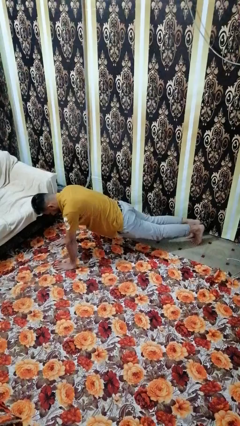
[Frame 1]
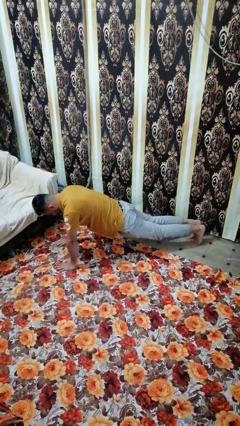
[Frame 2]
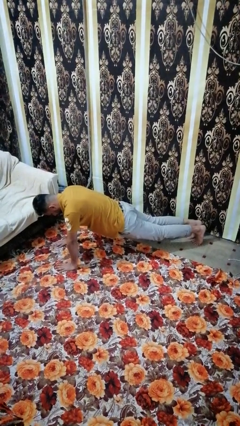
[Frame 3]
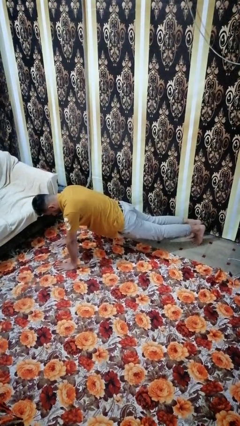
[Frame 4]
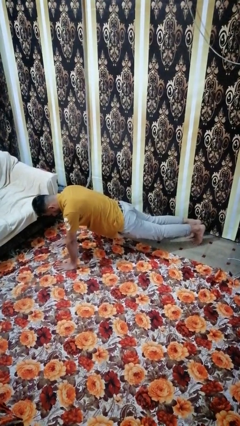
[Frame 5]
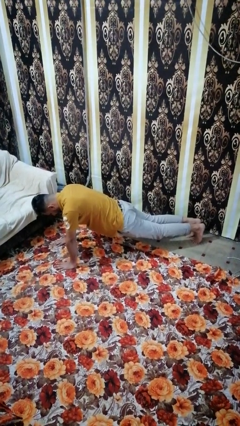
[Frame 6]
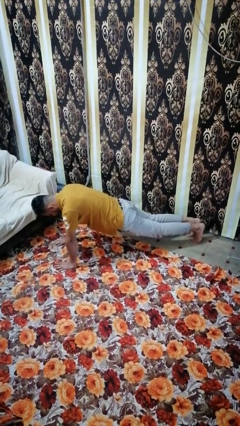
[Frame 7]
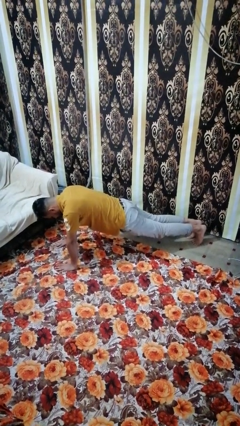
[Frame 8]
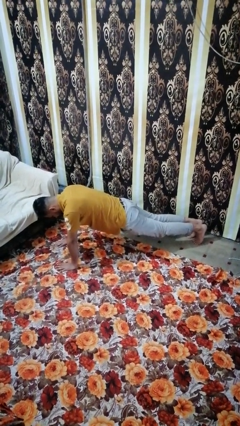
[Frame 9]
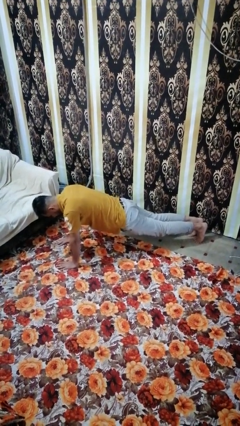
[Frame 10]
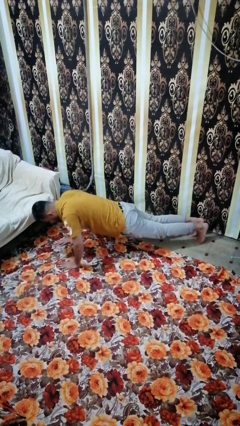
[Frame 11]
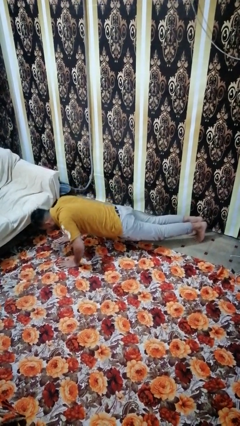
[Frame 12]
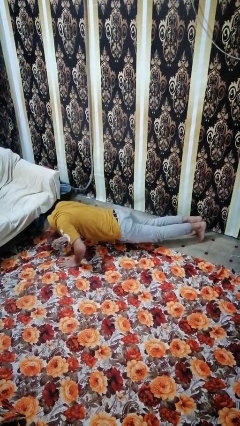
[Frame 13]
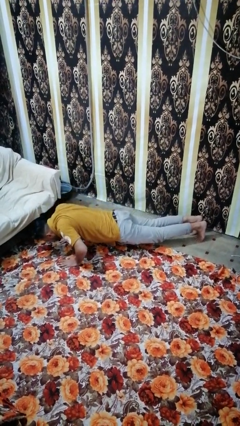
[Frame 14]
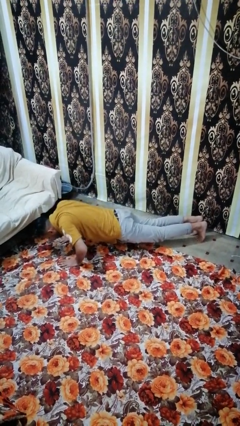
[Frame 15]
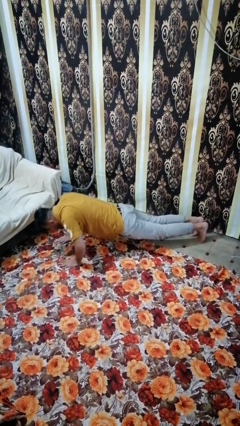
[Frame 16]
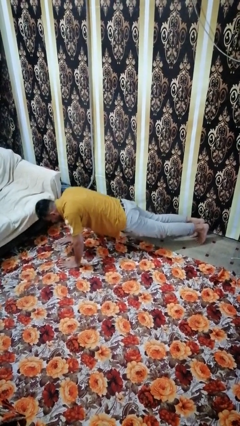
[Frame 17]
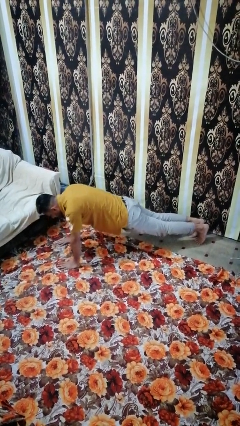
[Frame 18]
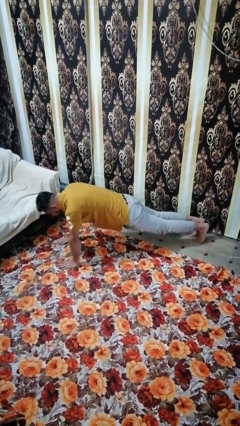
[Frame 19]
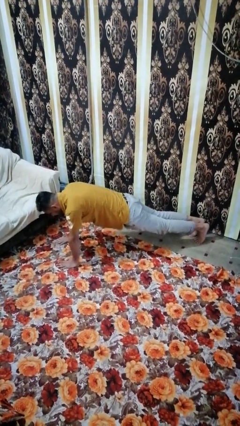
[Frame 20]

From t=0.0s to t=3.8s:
person exercises with pushup

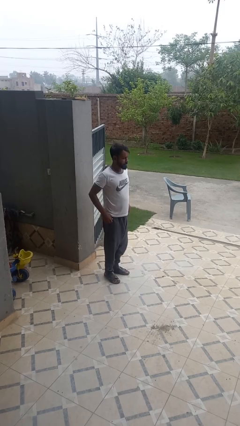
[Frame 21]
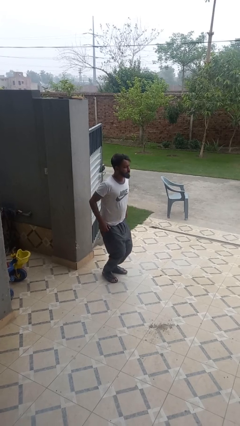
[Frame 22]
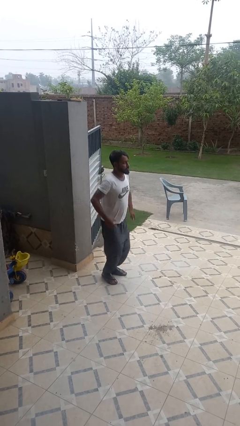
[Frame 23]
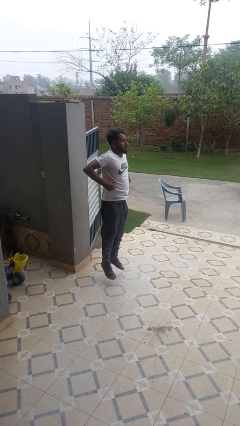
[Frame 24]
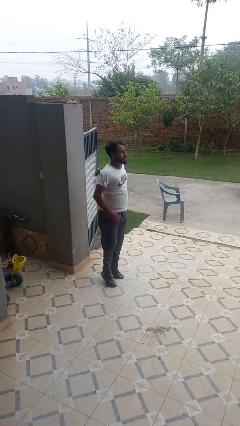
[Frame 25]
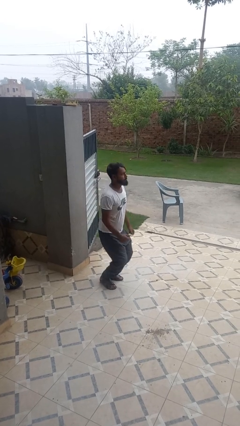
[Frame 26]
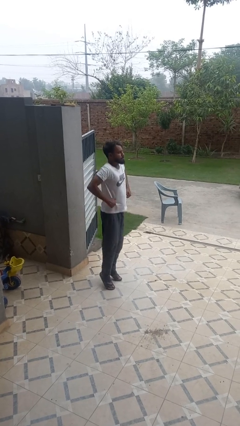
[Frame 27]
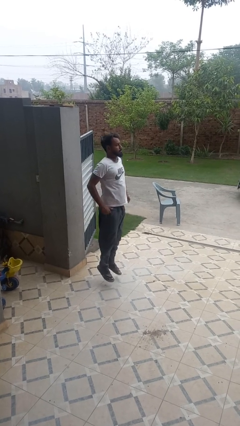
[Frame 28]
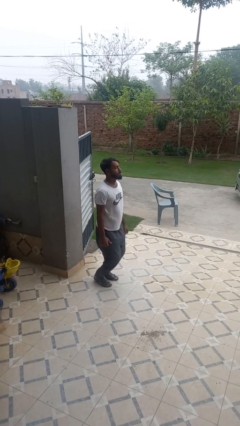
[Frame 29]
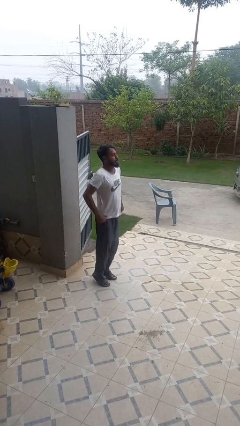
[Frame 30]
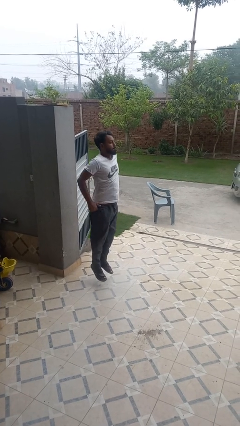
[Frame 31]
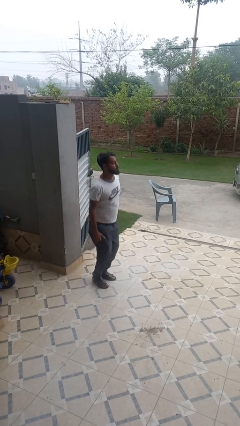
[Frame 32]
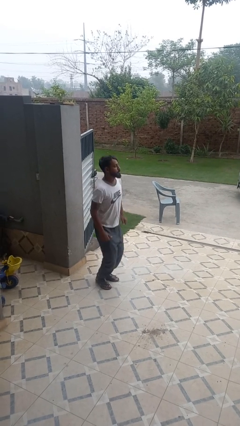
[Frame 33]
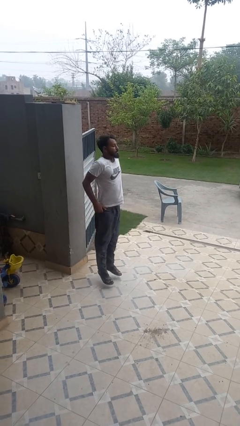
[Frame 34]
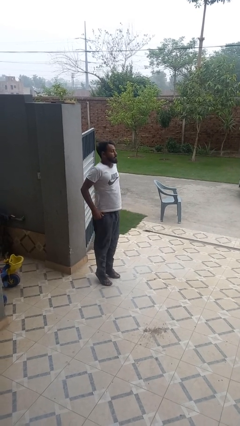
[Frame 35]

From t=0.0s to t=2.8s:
person jumps

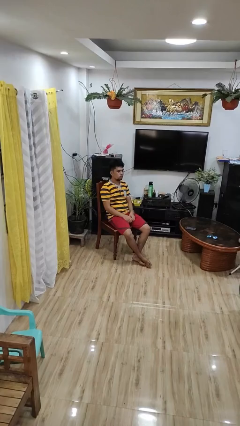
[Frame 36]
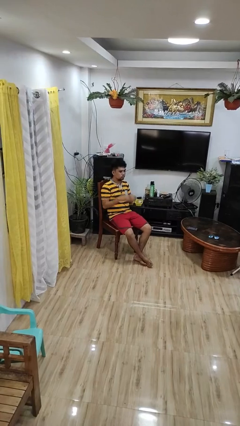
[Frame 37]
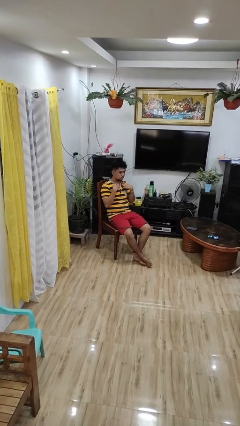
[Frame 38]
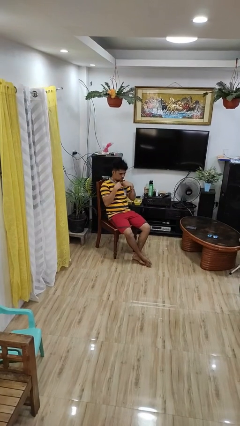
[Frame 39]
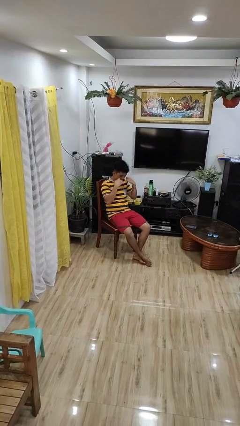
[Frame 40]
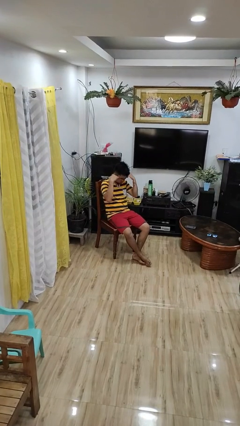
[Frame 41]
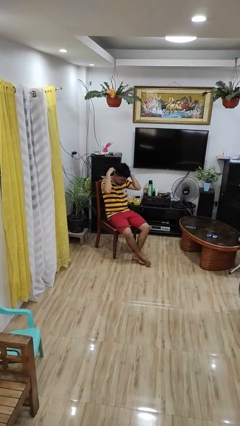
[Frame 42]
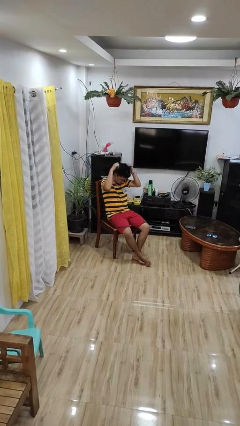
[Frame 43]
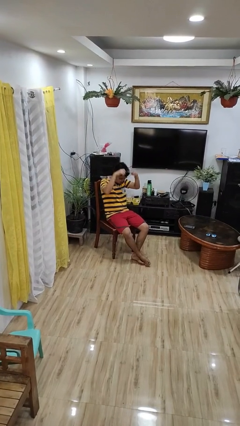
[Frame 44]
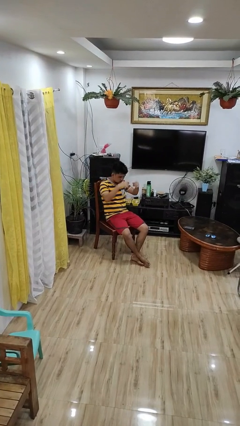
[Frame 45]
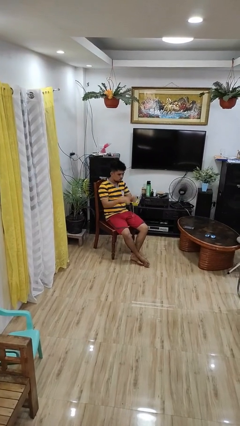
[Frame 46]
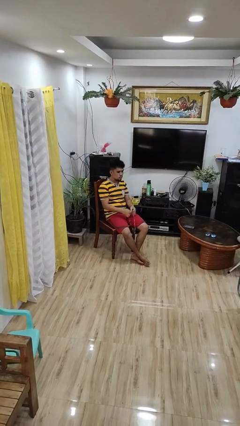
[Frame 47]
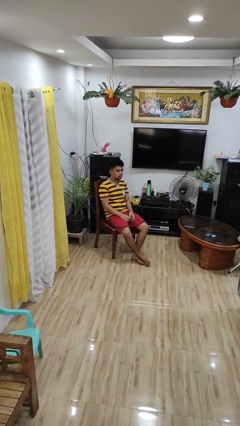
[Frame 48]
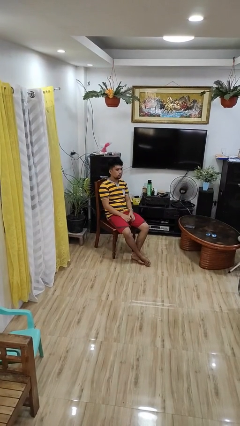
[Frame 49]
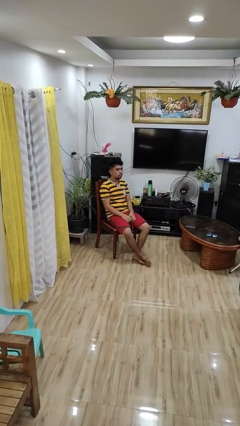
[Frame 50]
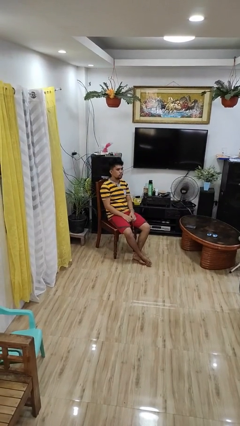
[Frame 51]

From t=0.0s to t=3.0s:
person takes off necklace

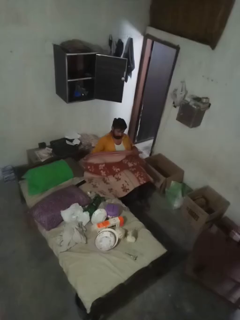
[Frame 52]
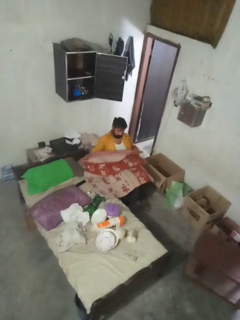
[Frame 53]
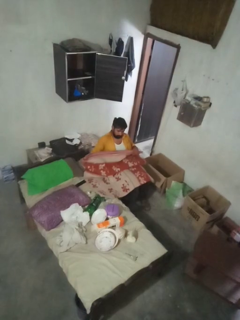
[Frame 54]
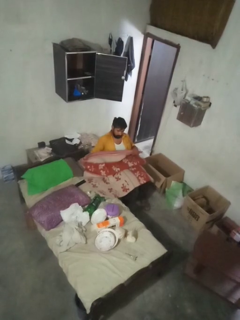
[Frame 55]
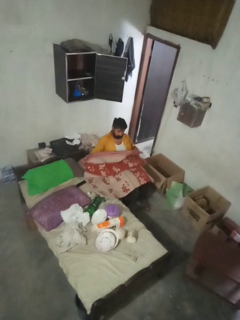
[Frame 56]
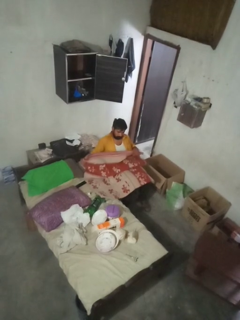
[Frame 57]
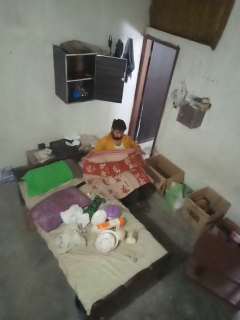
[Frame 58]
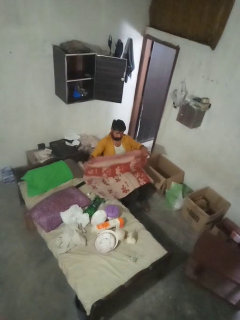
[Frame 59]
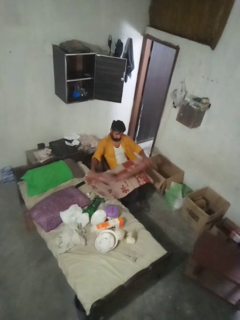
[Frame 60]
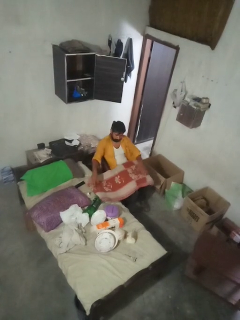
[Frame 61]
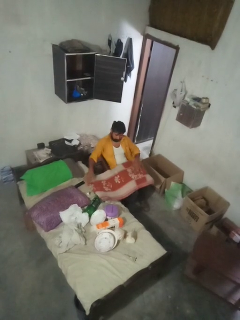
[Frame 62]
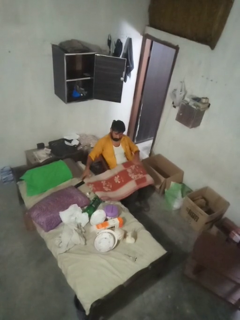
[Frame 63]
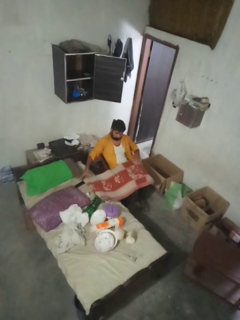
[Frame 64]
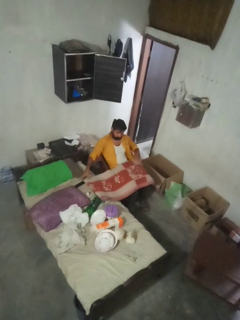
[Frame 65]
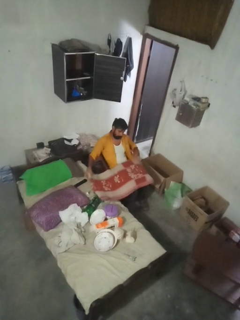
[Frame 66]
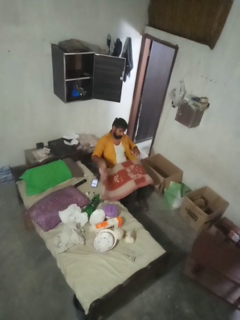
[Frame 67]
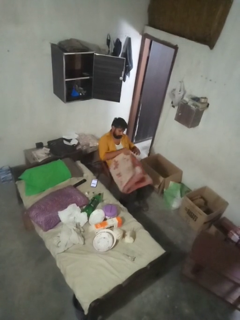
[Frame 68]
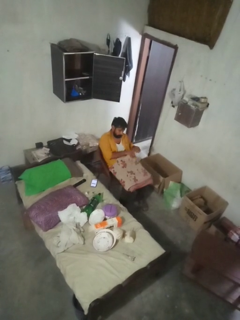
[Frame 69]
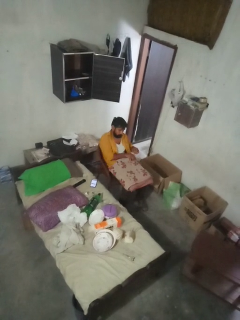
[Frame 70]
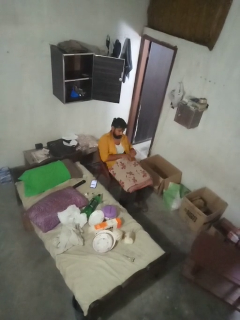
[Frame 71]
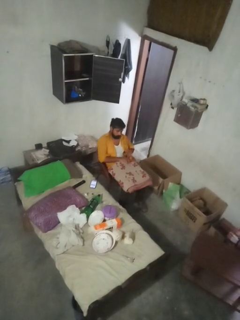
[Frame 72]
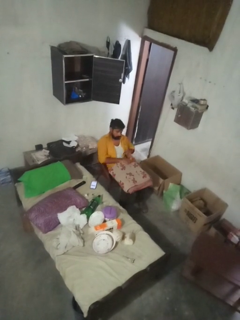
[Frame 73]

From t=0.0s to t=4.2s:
person folds blanket

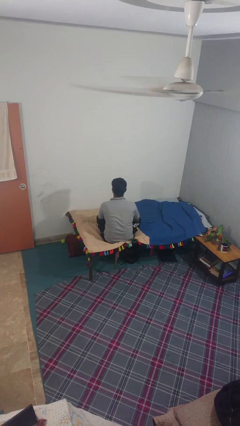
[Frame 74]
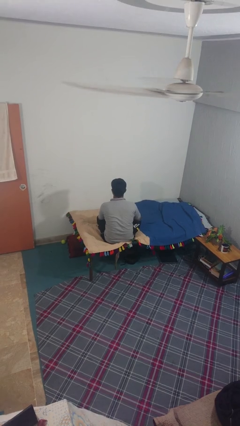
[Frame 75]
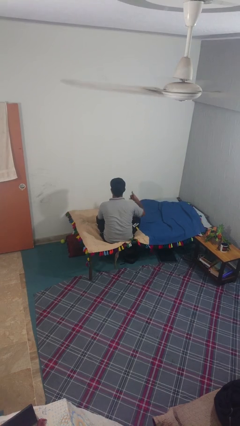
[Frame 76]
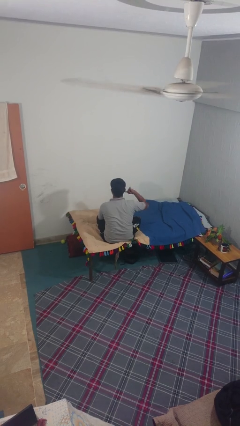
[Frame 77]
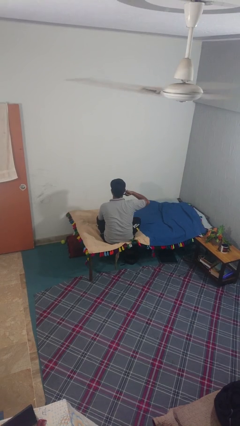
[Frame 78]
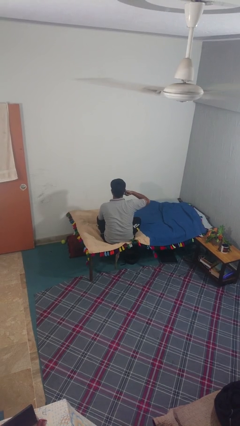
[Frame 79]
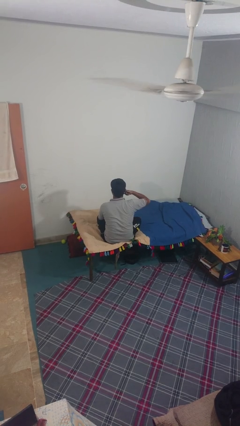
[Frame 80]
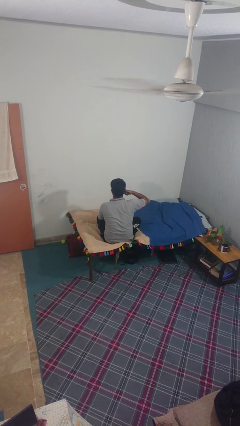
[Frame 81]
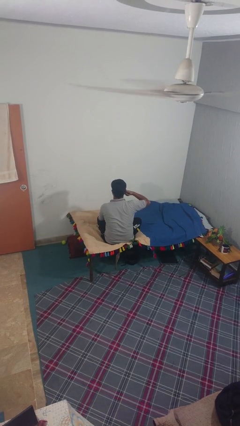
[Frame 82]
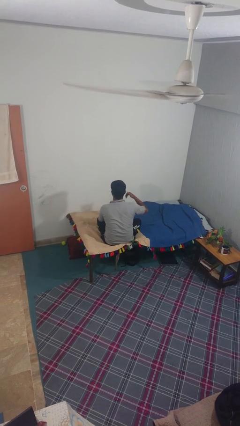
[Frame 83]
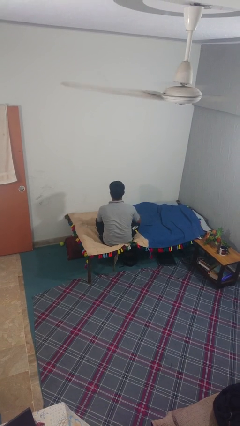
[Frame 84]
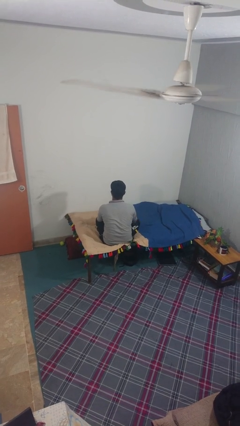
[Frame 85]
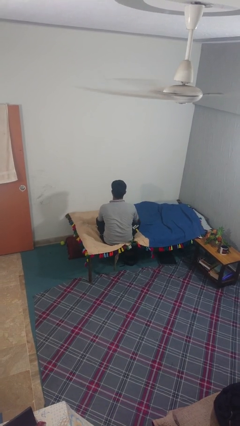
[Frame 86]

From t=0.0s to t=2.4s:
person gestures call me

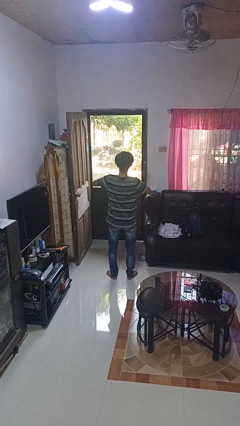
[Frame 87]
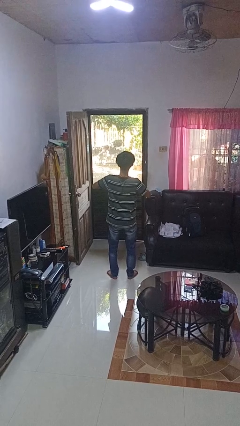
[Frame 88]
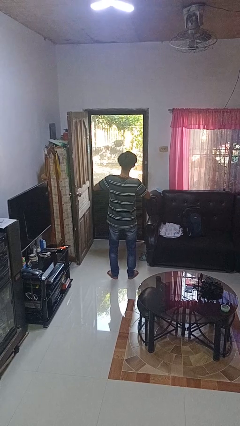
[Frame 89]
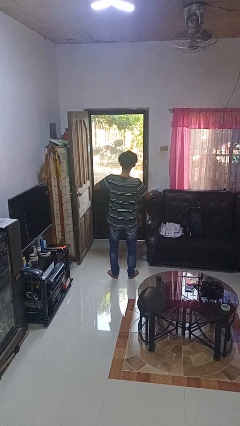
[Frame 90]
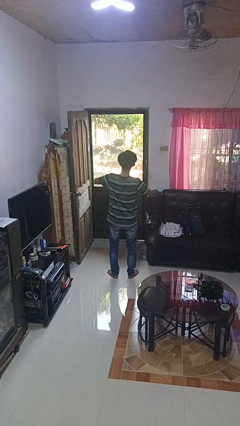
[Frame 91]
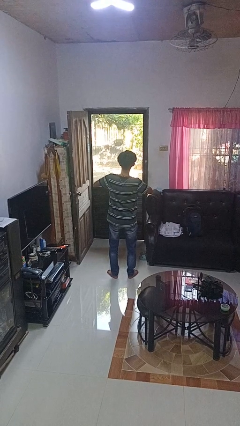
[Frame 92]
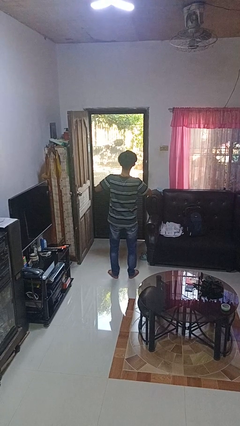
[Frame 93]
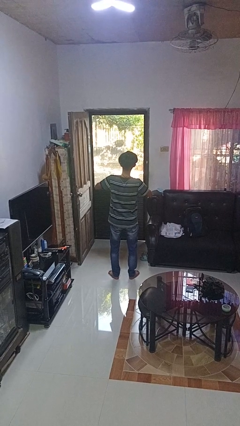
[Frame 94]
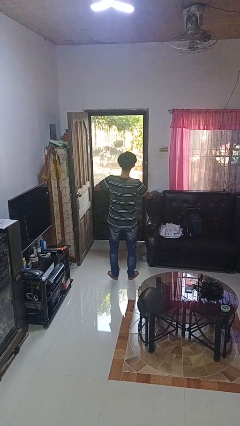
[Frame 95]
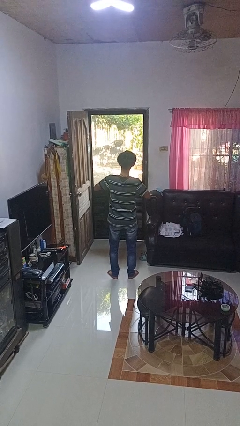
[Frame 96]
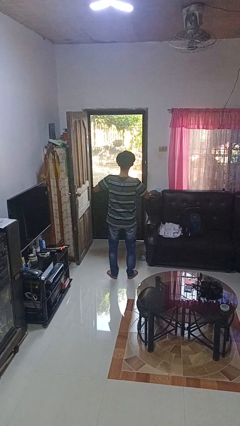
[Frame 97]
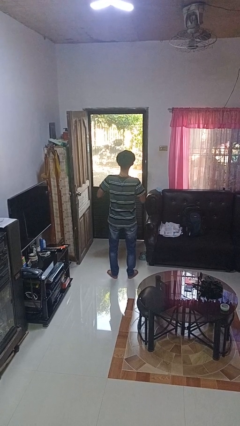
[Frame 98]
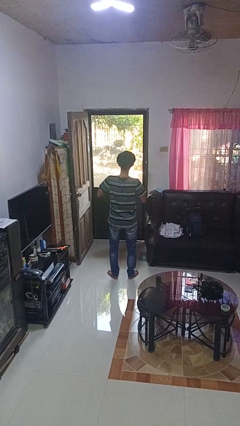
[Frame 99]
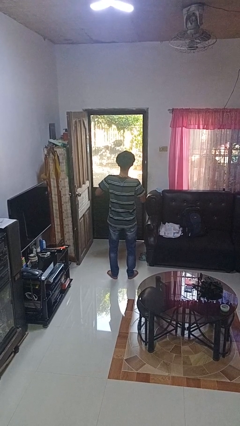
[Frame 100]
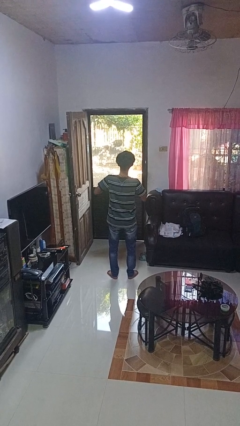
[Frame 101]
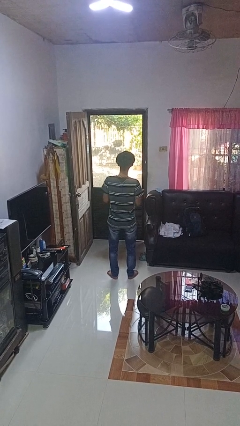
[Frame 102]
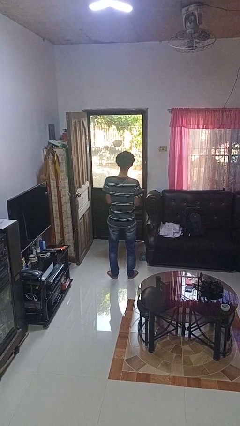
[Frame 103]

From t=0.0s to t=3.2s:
person unbuttons shirt
